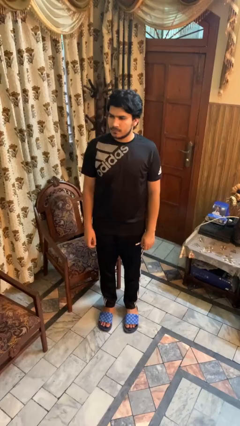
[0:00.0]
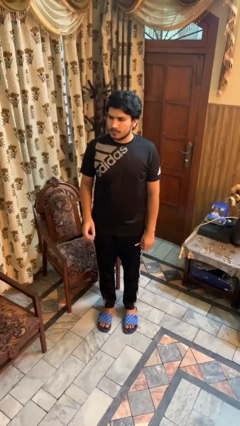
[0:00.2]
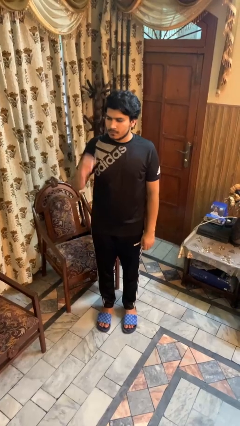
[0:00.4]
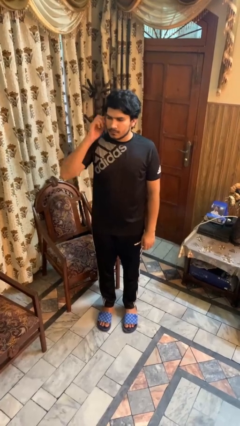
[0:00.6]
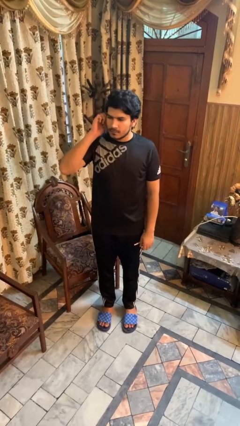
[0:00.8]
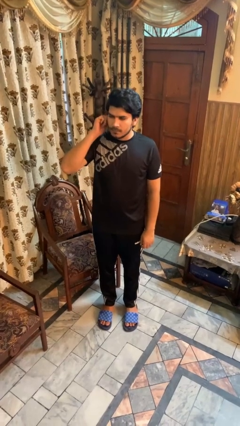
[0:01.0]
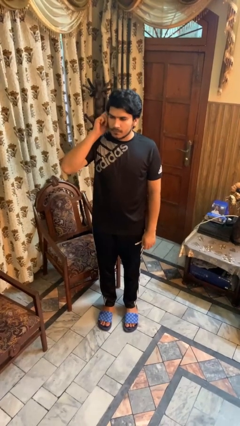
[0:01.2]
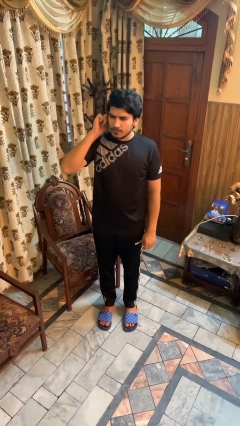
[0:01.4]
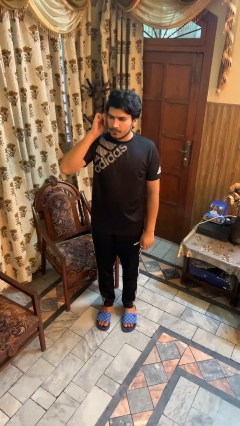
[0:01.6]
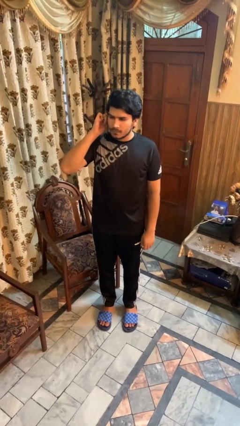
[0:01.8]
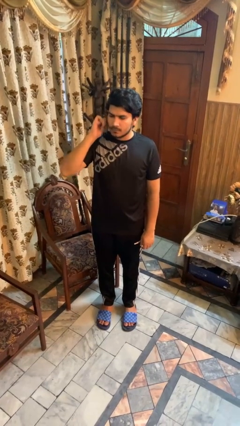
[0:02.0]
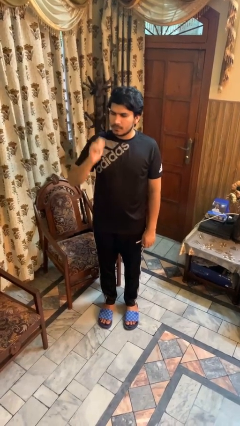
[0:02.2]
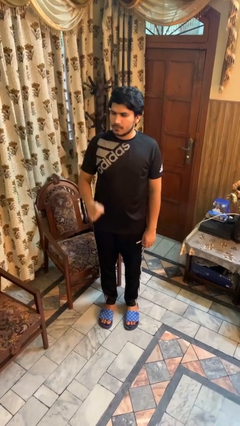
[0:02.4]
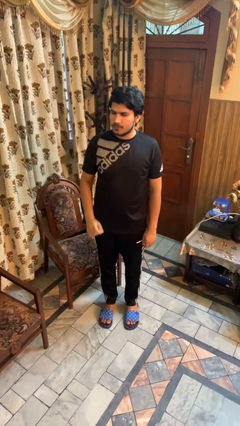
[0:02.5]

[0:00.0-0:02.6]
person touches earlobe

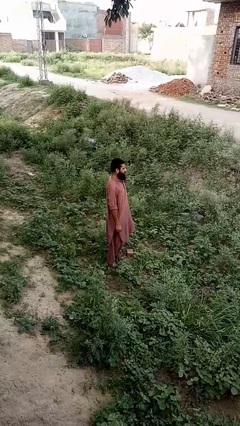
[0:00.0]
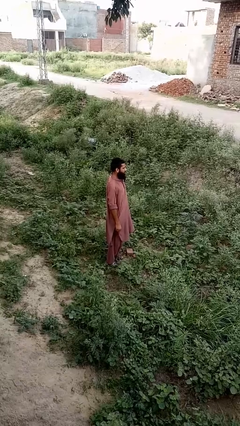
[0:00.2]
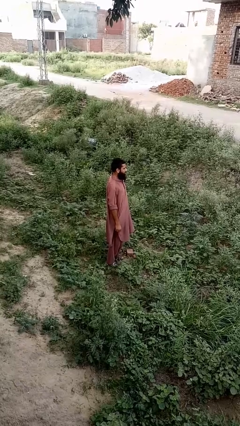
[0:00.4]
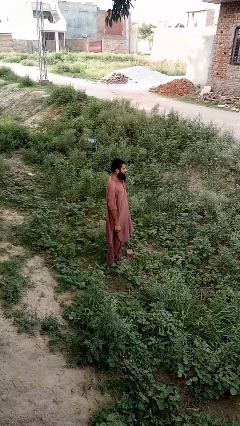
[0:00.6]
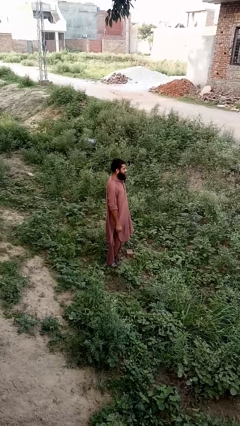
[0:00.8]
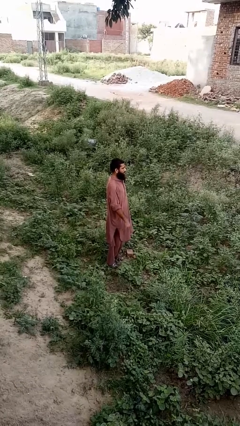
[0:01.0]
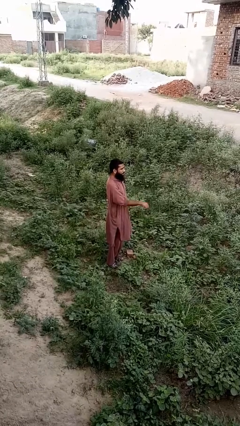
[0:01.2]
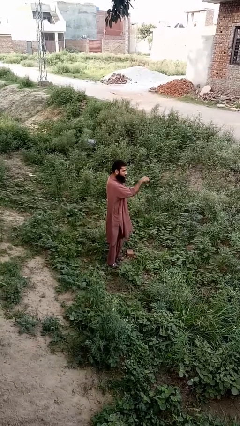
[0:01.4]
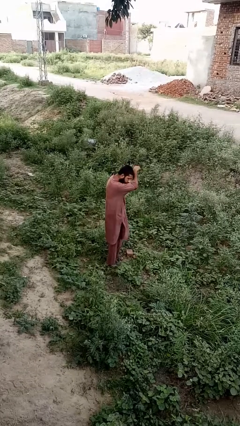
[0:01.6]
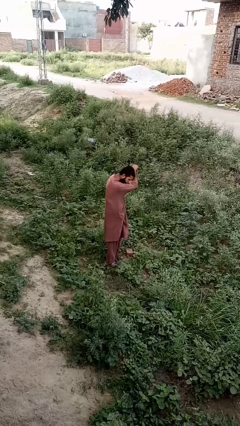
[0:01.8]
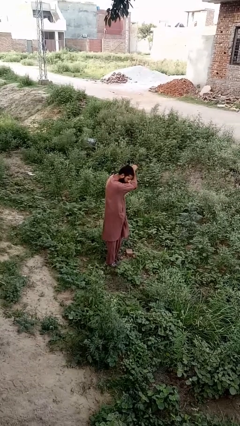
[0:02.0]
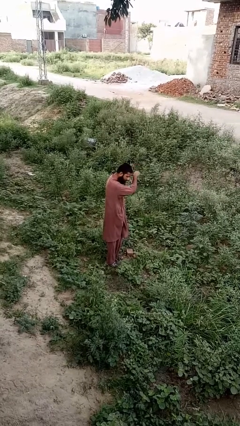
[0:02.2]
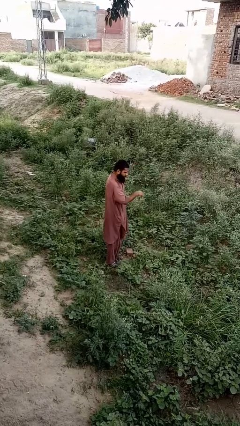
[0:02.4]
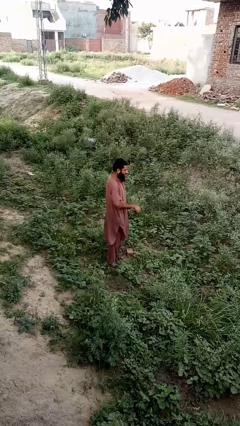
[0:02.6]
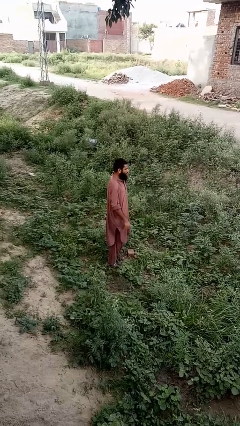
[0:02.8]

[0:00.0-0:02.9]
person sneezes into arm

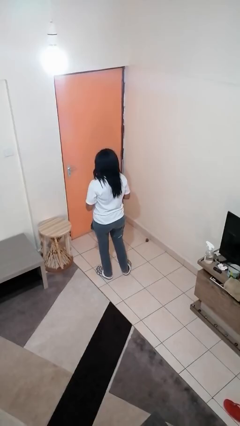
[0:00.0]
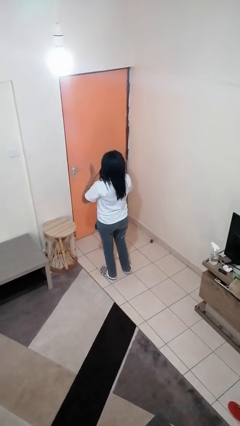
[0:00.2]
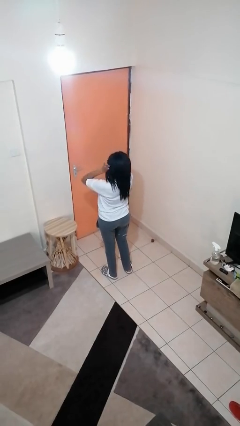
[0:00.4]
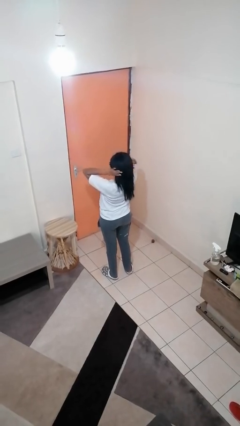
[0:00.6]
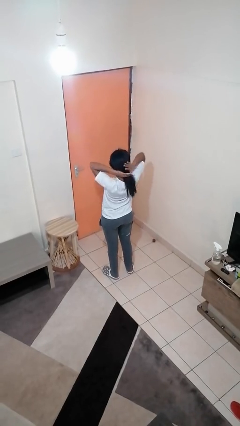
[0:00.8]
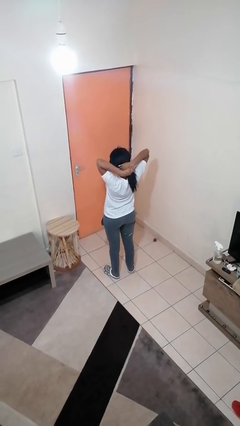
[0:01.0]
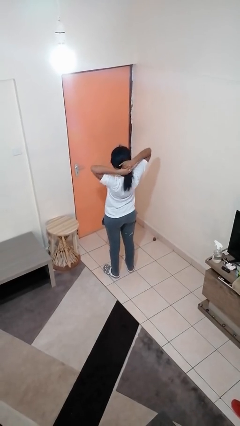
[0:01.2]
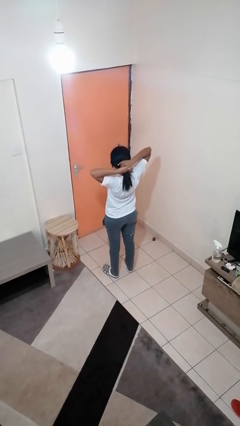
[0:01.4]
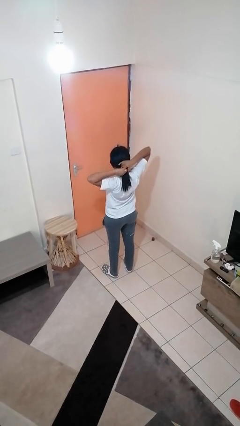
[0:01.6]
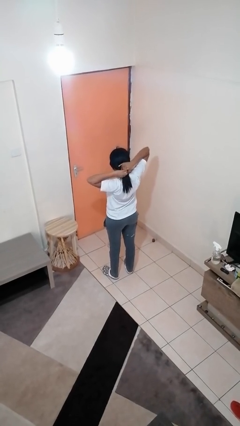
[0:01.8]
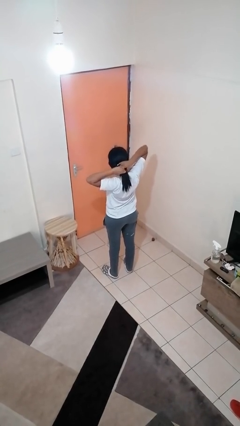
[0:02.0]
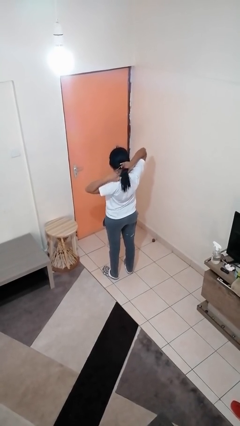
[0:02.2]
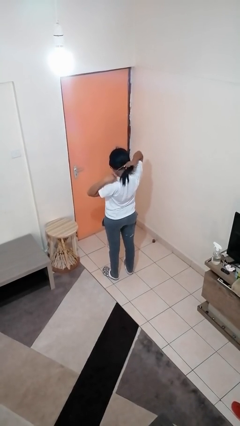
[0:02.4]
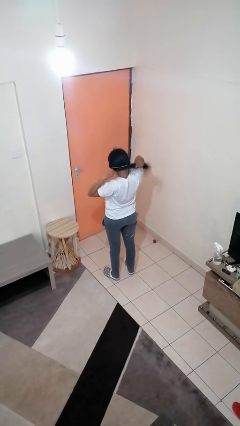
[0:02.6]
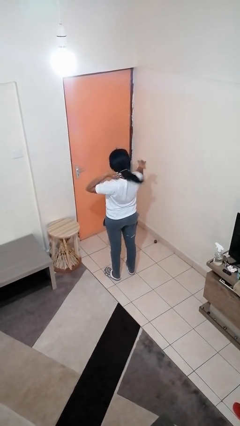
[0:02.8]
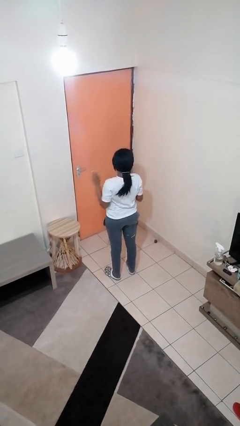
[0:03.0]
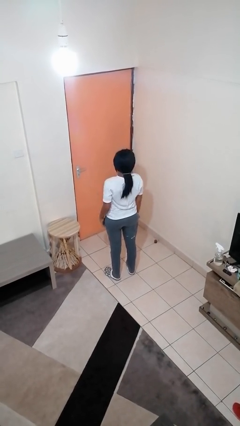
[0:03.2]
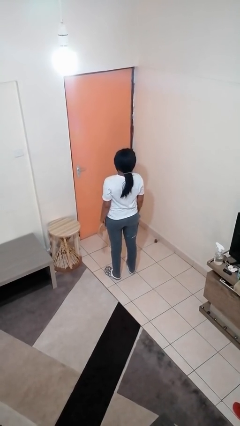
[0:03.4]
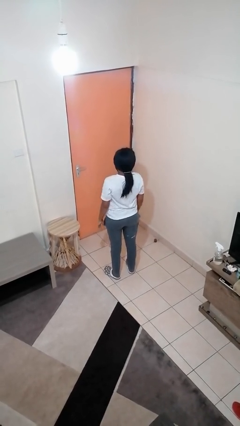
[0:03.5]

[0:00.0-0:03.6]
person puts hair in ponytail

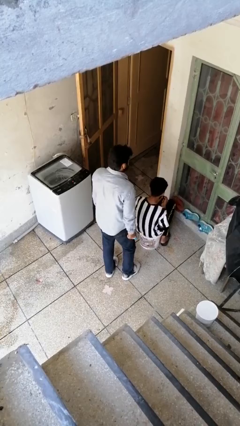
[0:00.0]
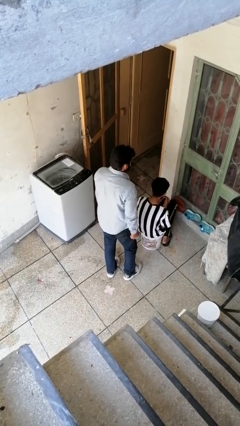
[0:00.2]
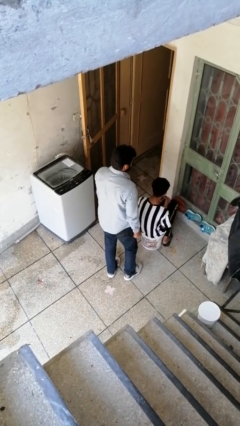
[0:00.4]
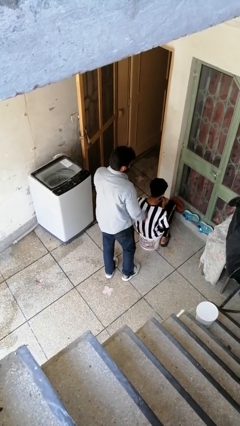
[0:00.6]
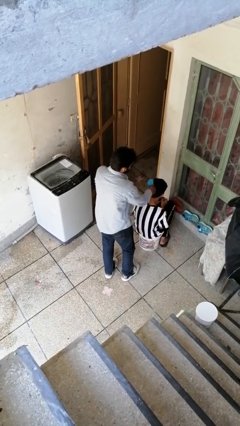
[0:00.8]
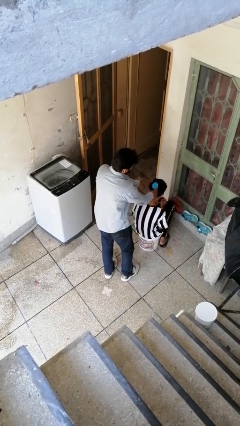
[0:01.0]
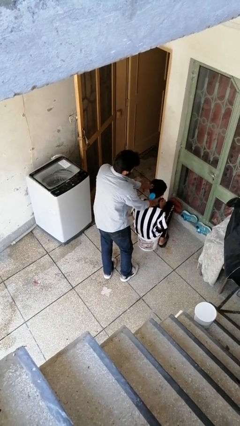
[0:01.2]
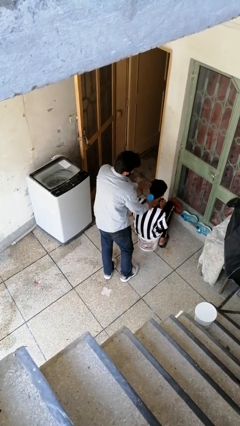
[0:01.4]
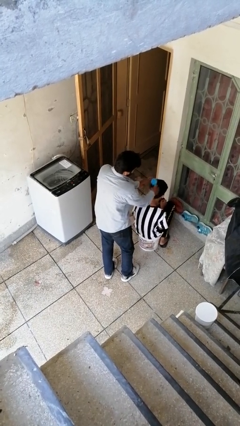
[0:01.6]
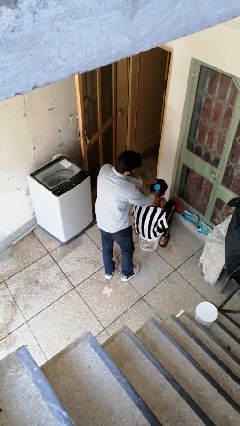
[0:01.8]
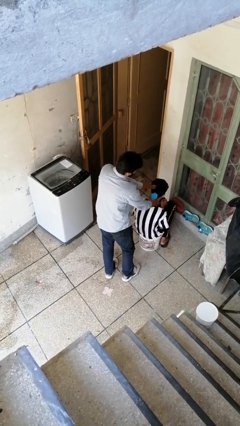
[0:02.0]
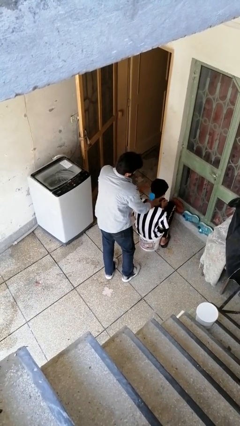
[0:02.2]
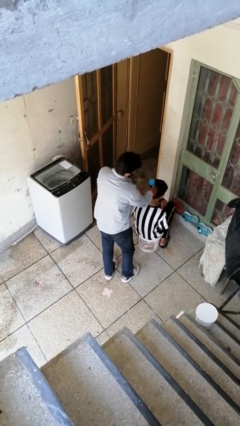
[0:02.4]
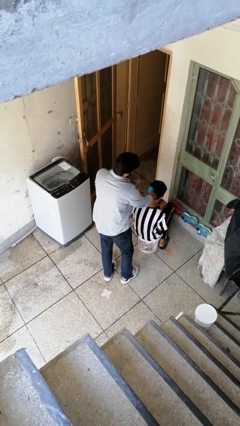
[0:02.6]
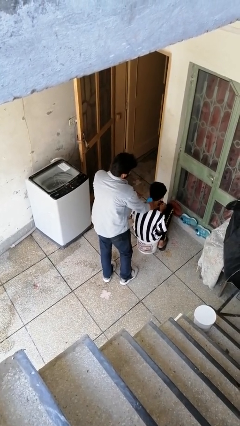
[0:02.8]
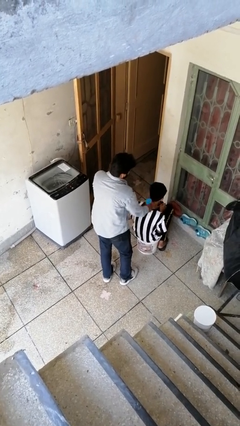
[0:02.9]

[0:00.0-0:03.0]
person brushes hair of person

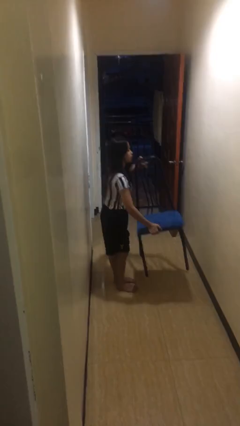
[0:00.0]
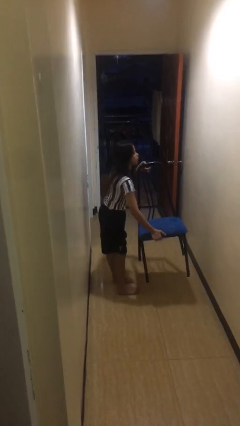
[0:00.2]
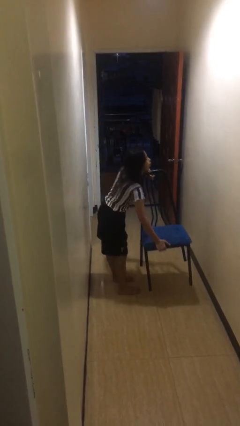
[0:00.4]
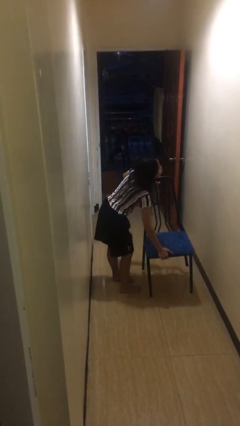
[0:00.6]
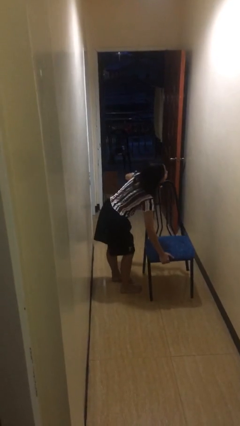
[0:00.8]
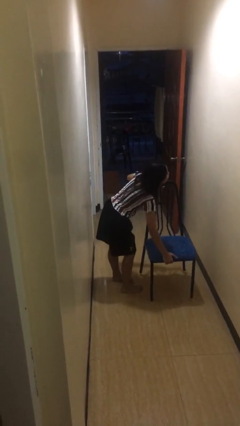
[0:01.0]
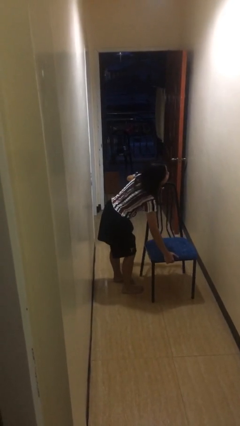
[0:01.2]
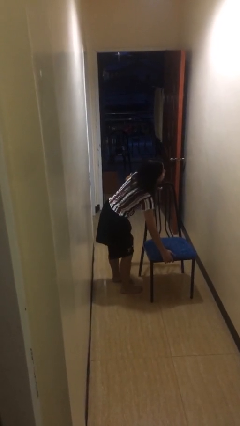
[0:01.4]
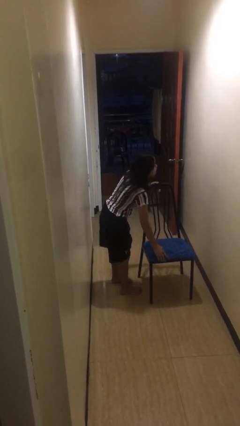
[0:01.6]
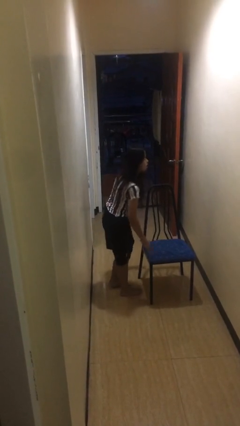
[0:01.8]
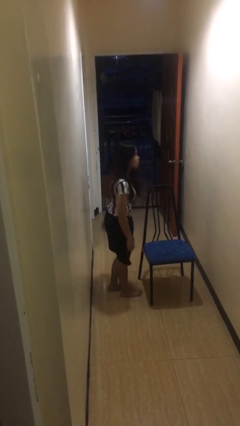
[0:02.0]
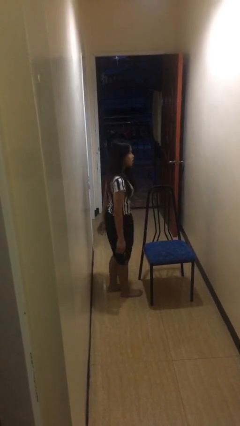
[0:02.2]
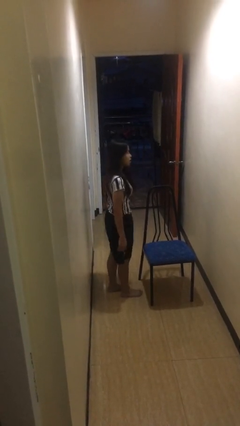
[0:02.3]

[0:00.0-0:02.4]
person puts down object on floor

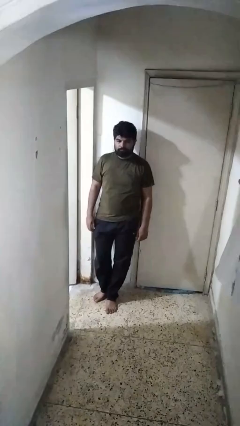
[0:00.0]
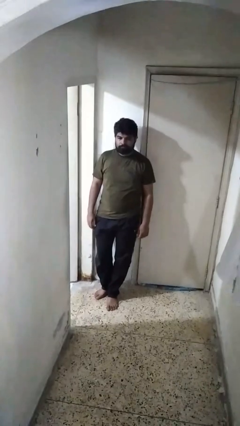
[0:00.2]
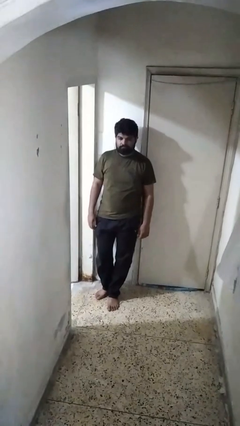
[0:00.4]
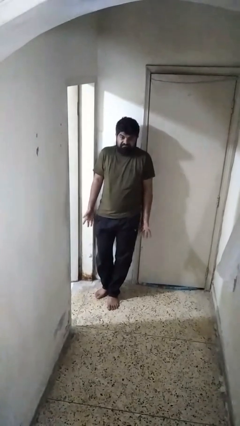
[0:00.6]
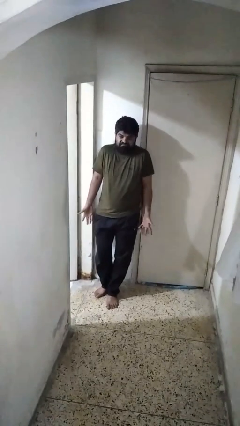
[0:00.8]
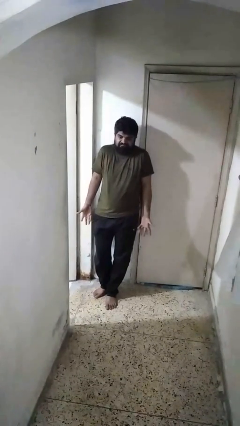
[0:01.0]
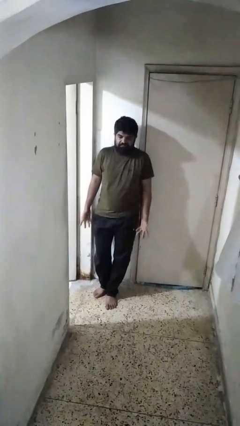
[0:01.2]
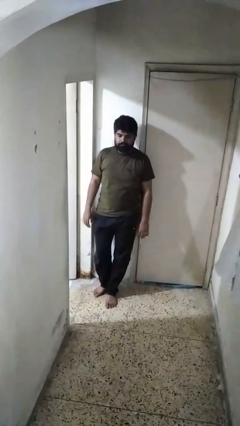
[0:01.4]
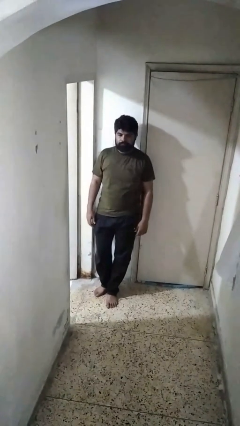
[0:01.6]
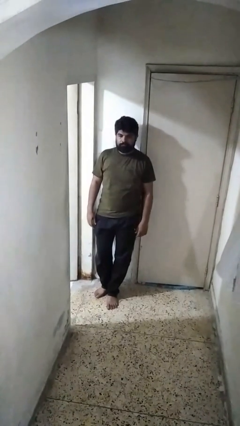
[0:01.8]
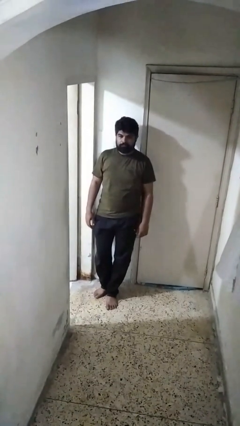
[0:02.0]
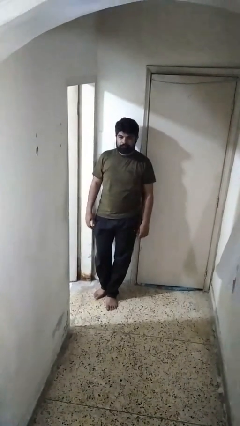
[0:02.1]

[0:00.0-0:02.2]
person shrugs

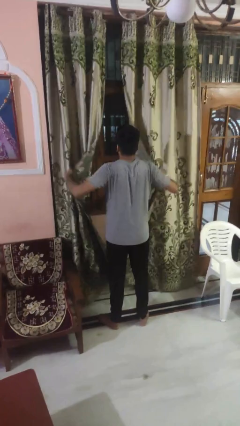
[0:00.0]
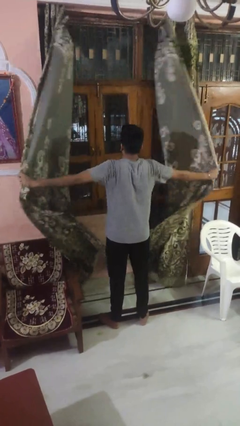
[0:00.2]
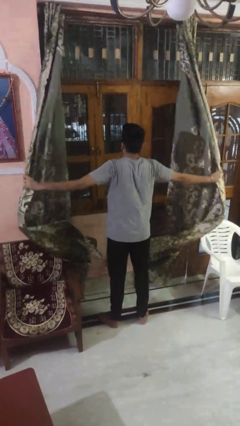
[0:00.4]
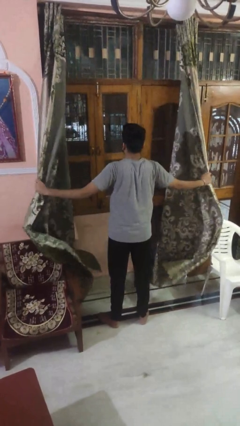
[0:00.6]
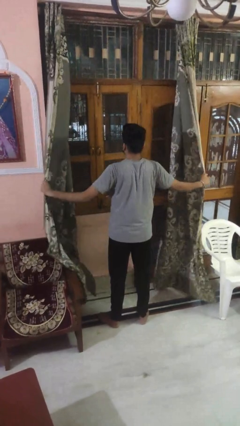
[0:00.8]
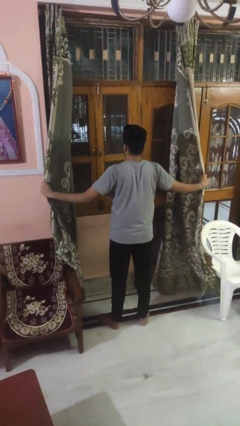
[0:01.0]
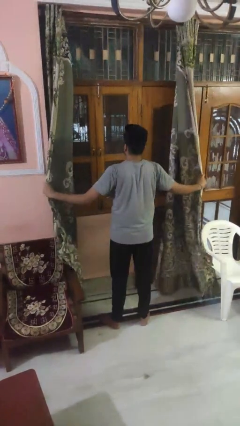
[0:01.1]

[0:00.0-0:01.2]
person opens curtains
